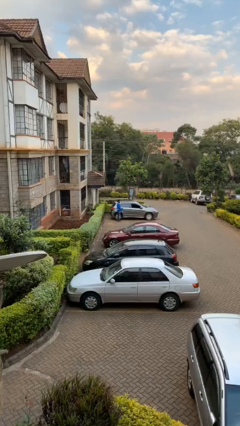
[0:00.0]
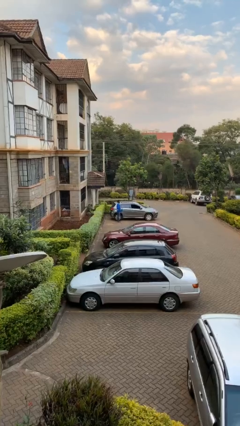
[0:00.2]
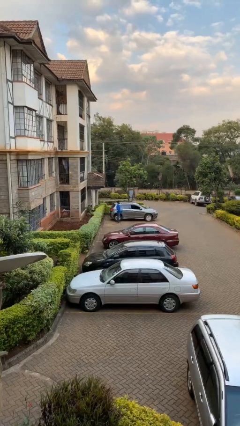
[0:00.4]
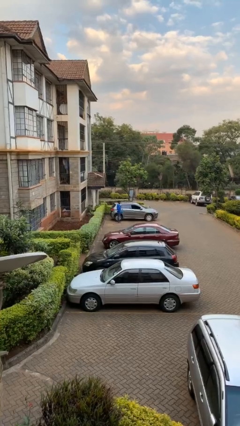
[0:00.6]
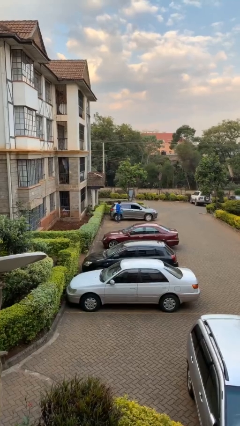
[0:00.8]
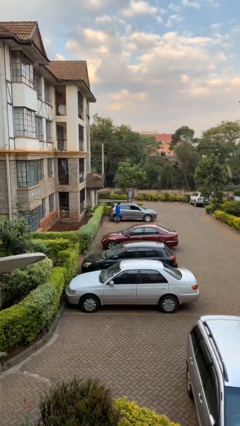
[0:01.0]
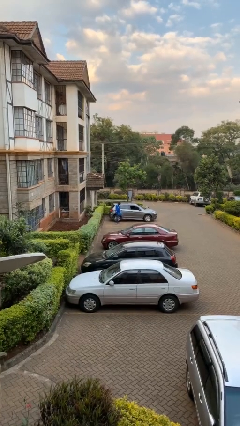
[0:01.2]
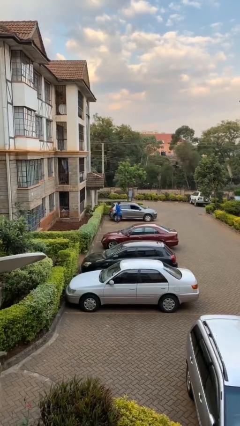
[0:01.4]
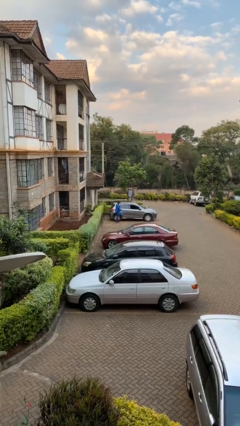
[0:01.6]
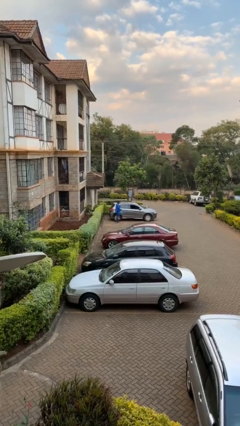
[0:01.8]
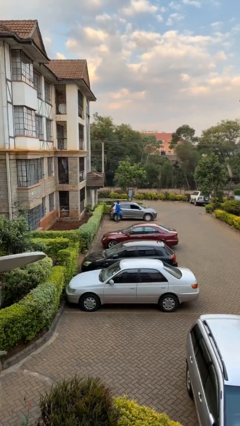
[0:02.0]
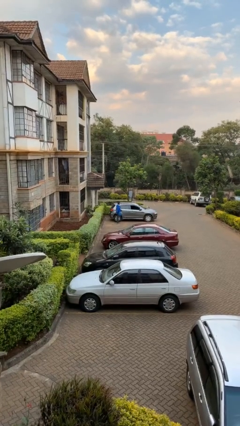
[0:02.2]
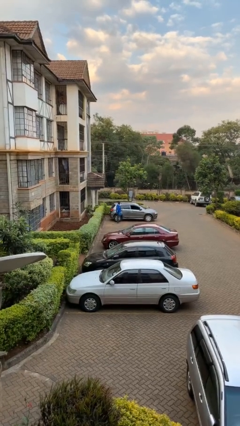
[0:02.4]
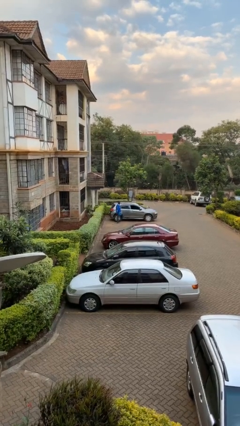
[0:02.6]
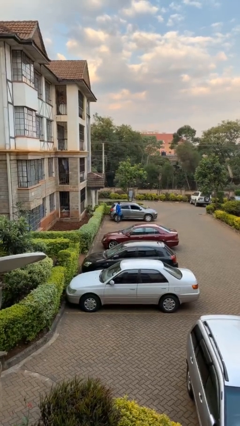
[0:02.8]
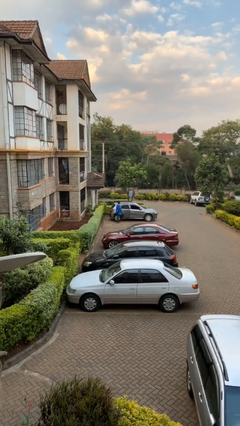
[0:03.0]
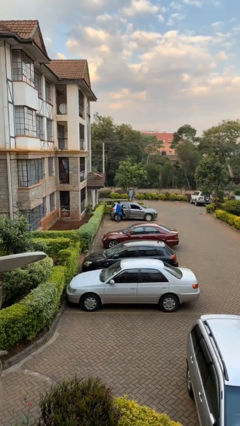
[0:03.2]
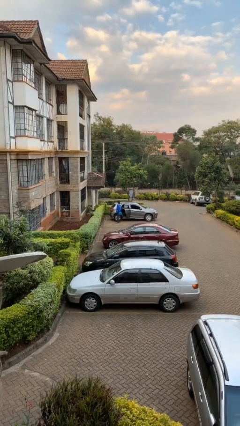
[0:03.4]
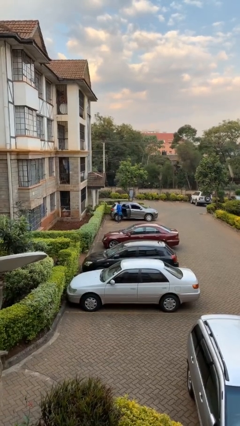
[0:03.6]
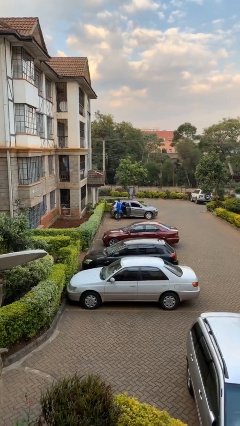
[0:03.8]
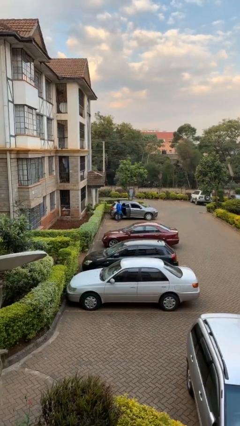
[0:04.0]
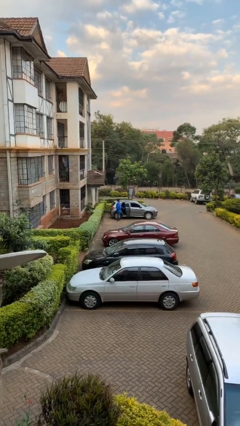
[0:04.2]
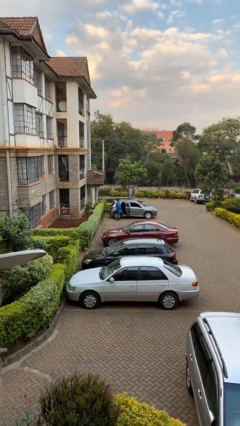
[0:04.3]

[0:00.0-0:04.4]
person opens car door

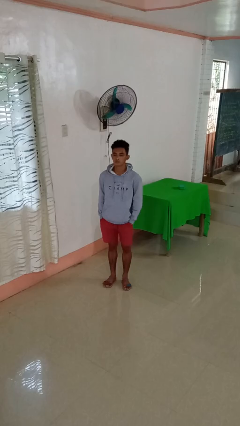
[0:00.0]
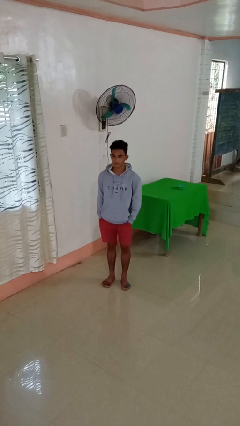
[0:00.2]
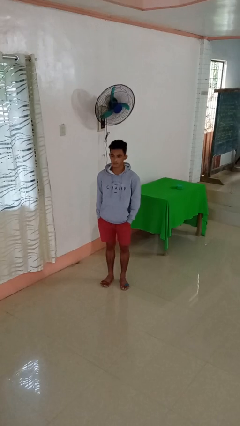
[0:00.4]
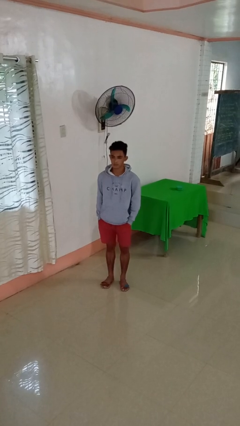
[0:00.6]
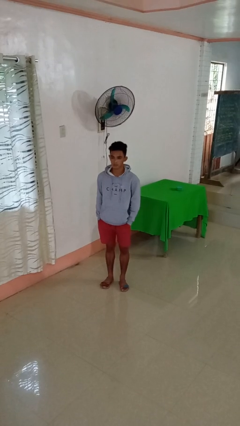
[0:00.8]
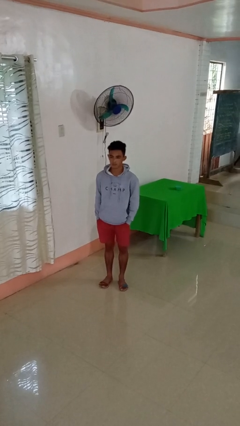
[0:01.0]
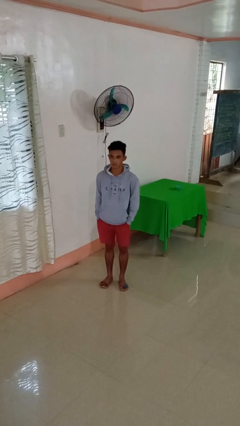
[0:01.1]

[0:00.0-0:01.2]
person nods head

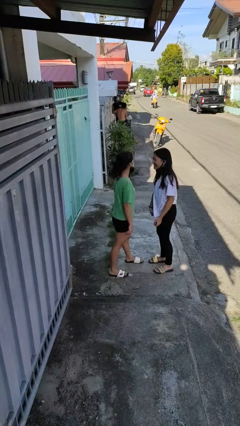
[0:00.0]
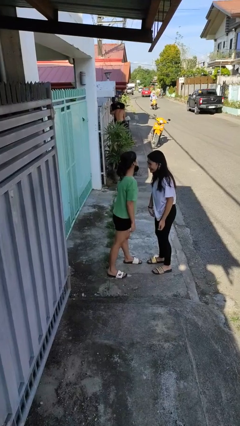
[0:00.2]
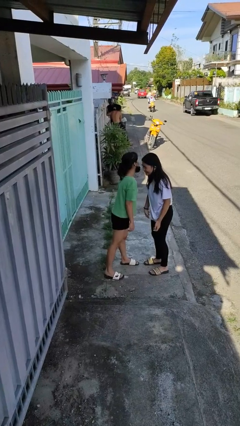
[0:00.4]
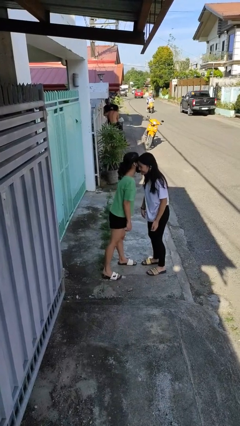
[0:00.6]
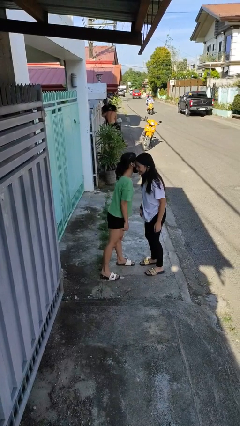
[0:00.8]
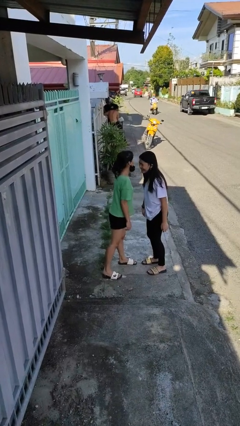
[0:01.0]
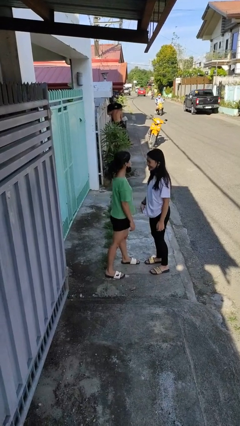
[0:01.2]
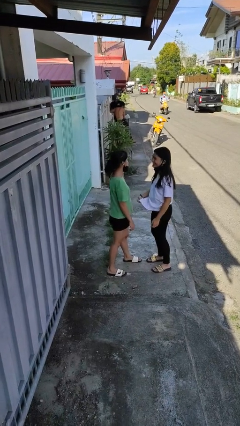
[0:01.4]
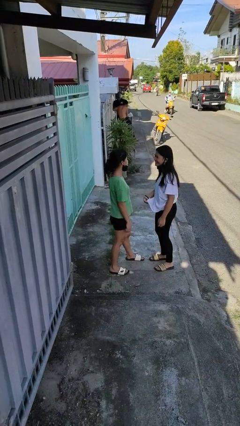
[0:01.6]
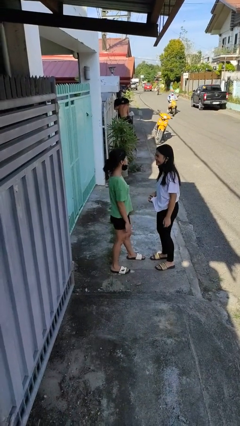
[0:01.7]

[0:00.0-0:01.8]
person kisses cheek of person

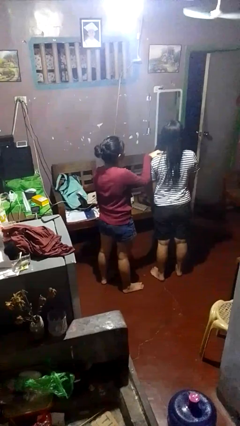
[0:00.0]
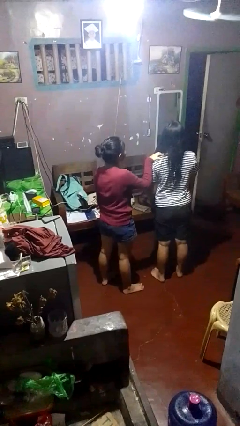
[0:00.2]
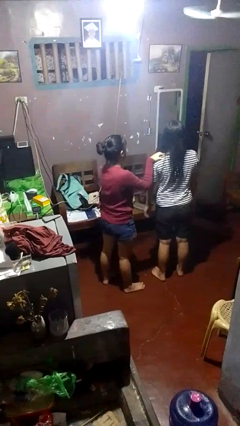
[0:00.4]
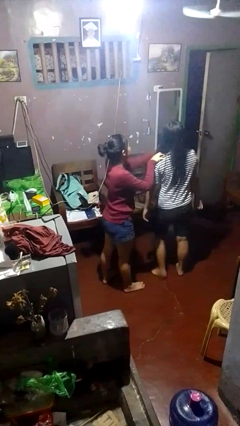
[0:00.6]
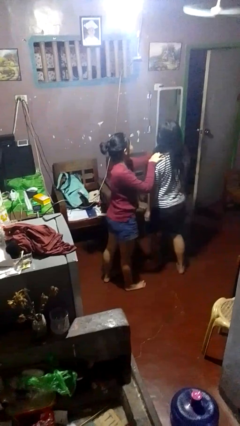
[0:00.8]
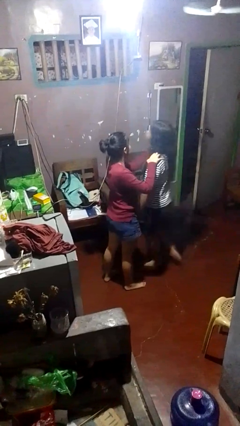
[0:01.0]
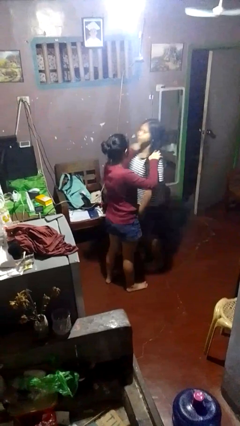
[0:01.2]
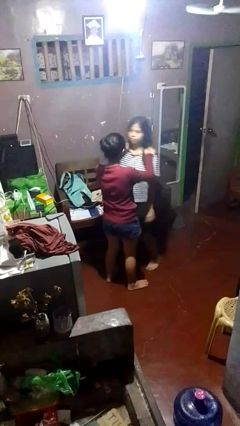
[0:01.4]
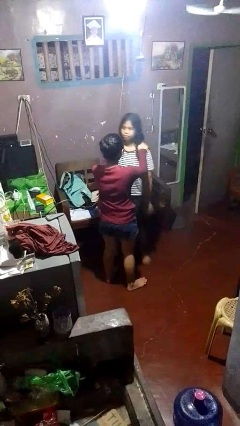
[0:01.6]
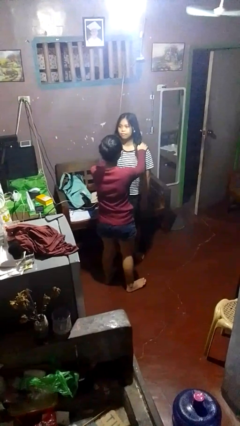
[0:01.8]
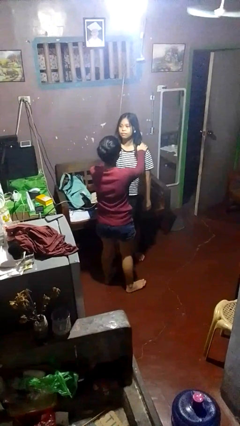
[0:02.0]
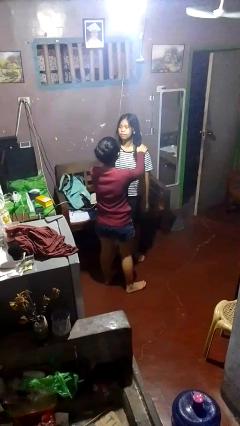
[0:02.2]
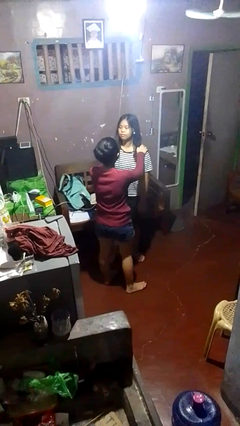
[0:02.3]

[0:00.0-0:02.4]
person spins person around

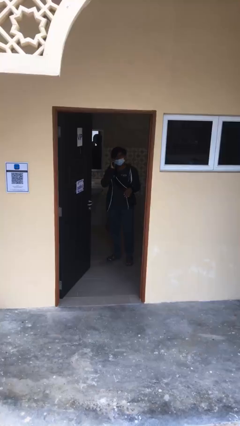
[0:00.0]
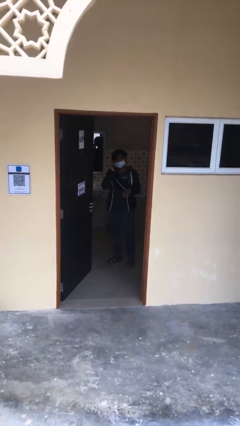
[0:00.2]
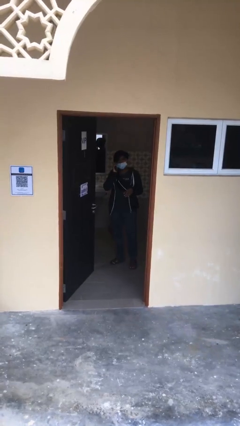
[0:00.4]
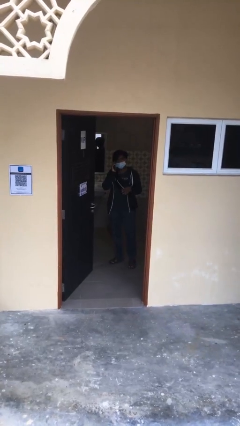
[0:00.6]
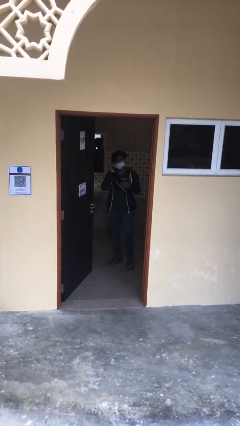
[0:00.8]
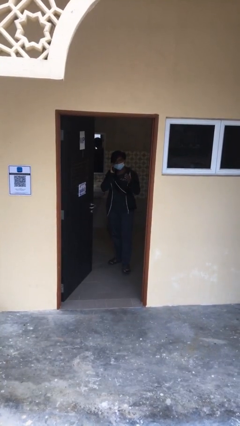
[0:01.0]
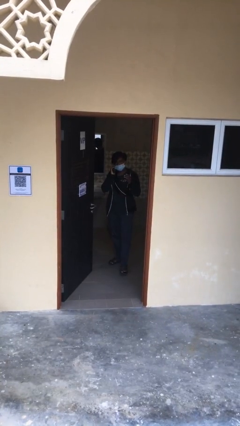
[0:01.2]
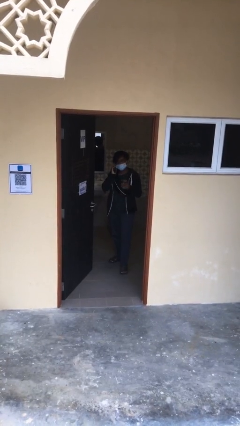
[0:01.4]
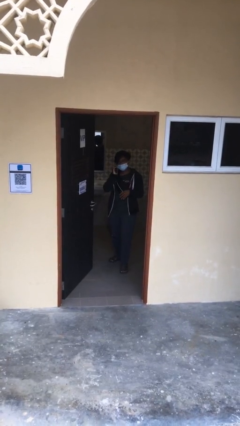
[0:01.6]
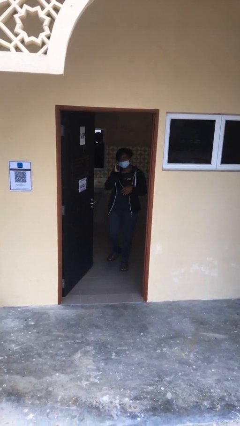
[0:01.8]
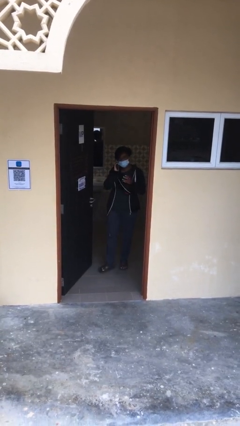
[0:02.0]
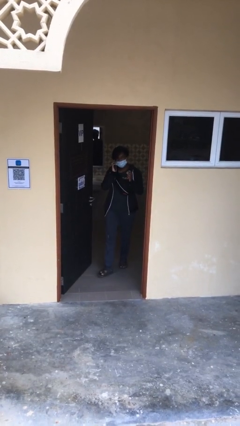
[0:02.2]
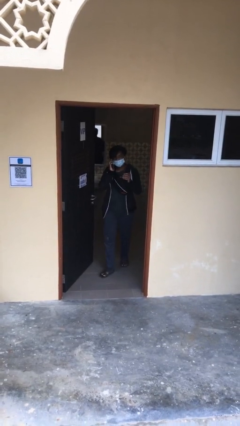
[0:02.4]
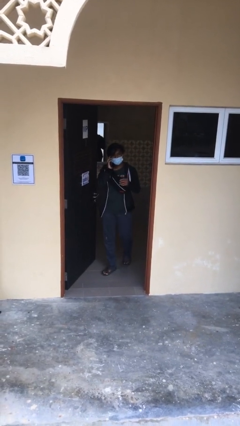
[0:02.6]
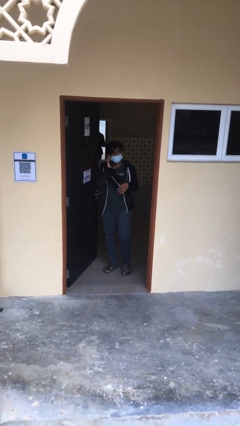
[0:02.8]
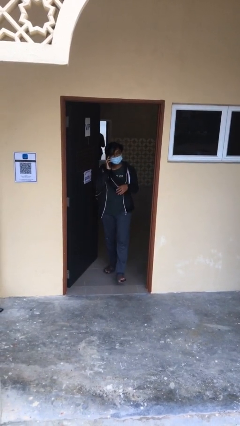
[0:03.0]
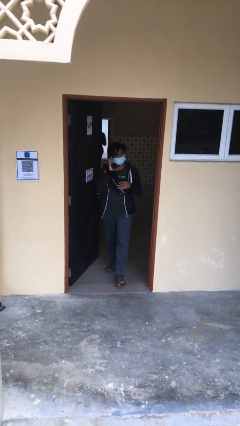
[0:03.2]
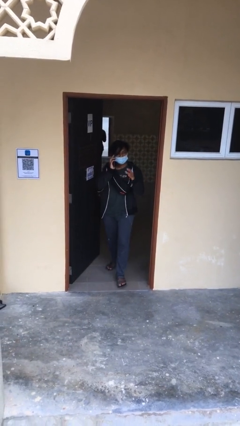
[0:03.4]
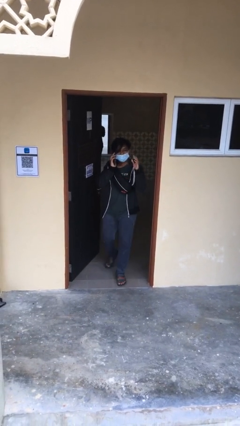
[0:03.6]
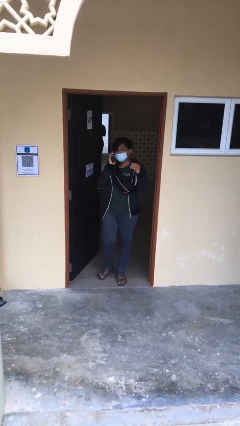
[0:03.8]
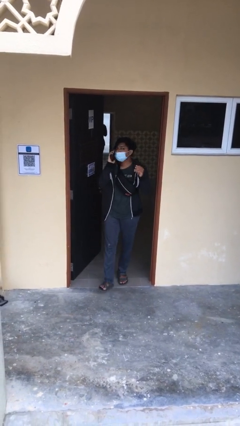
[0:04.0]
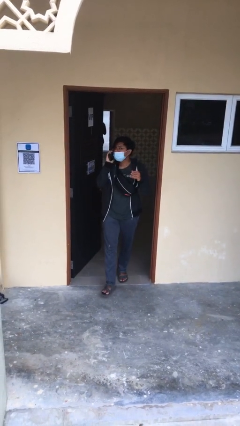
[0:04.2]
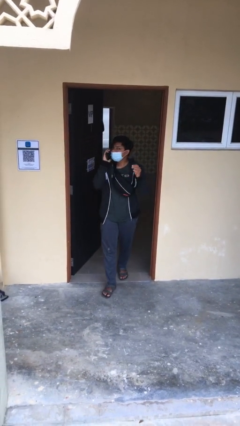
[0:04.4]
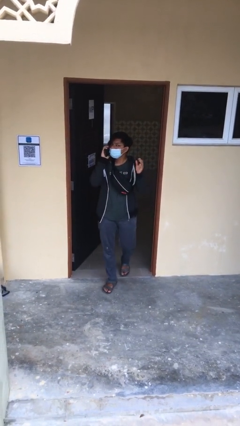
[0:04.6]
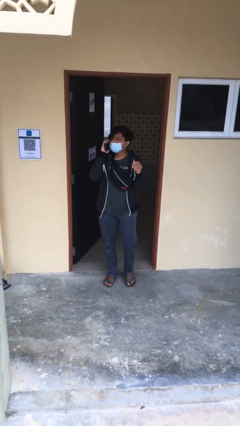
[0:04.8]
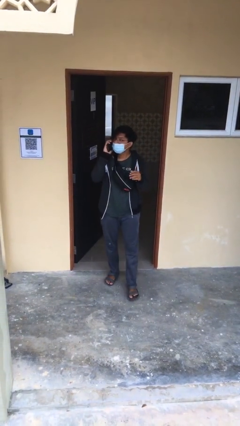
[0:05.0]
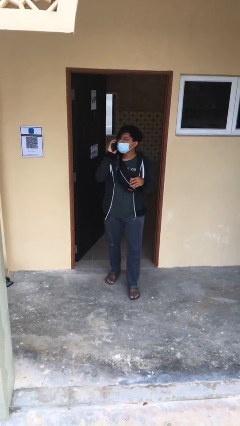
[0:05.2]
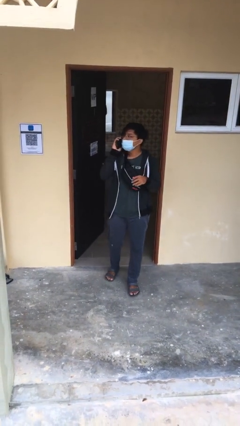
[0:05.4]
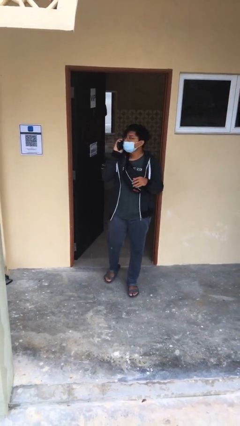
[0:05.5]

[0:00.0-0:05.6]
person enters scene through structure

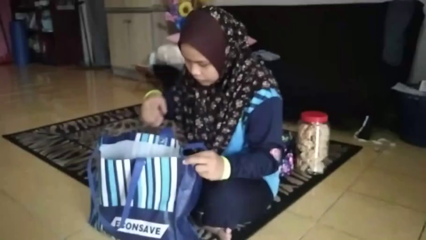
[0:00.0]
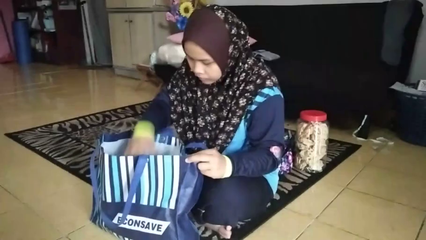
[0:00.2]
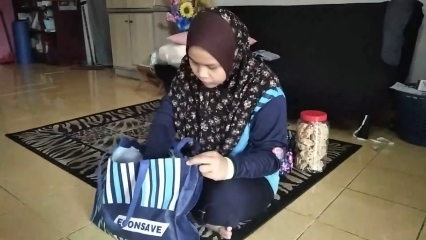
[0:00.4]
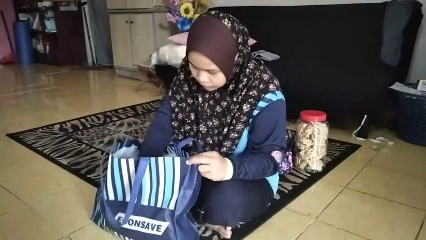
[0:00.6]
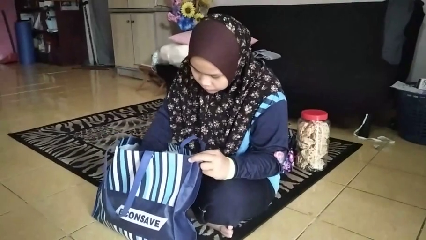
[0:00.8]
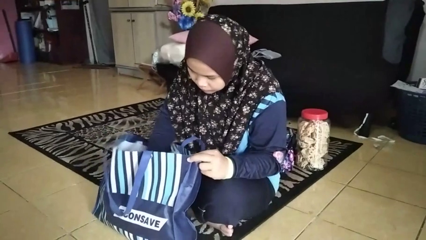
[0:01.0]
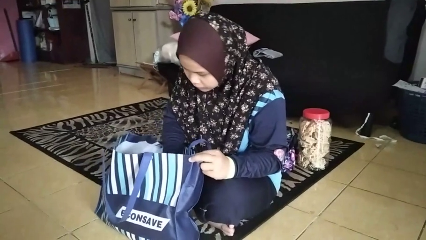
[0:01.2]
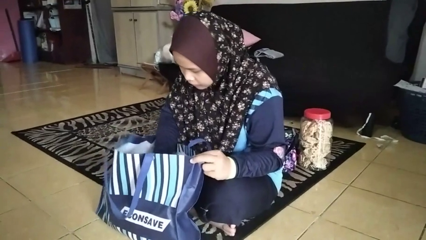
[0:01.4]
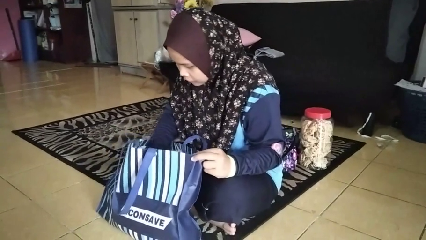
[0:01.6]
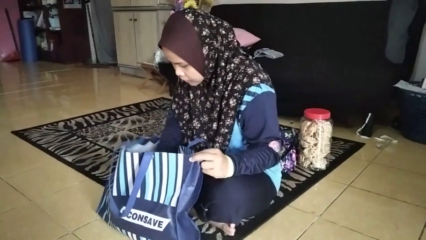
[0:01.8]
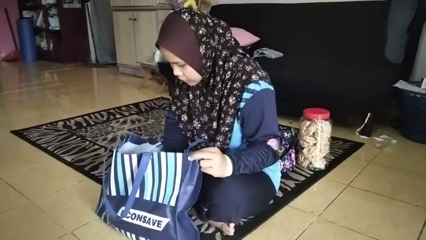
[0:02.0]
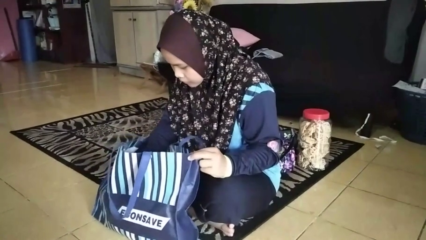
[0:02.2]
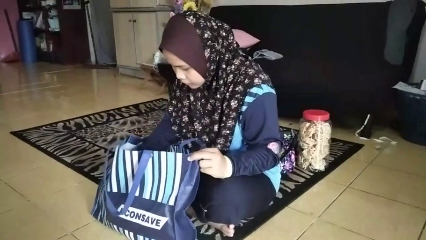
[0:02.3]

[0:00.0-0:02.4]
person searches in bag
